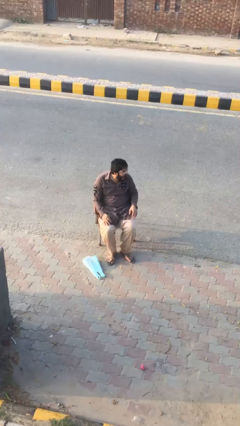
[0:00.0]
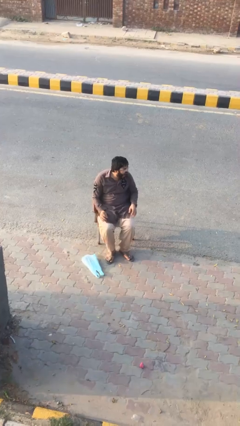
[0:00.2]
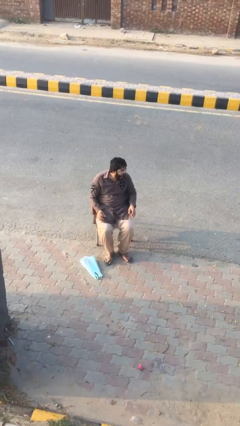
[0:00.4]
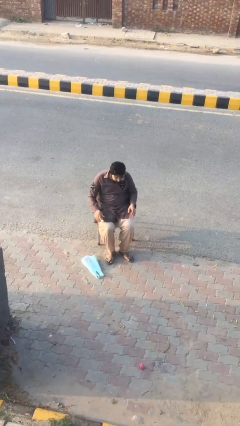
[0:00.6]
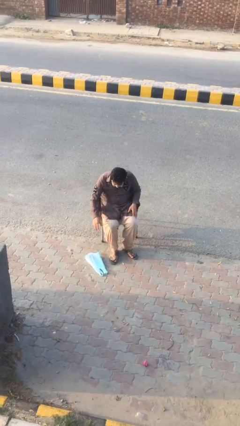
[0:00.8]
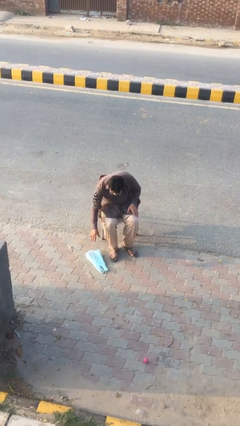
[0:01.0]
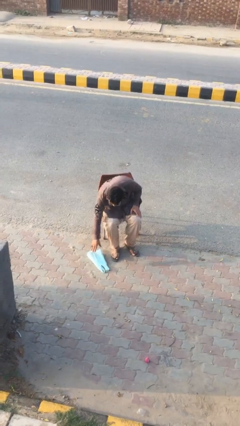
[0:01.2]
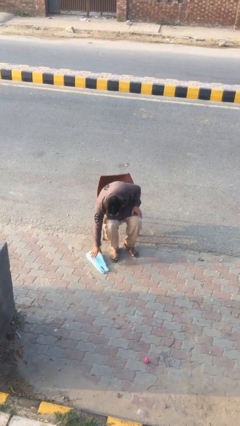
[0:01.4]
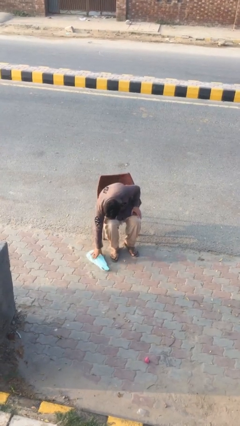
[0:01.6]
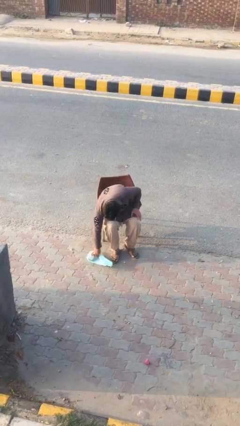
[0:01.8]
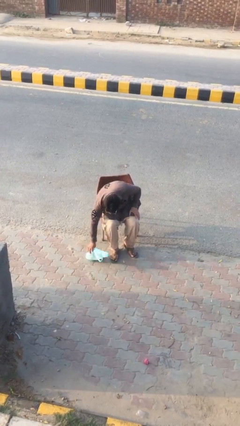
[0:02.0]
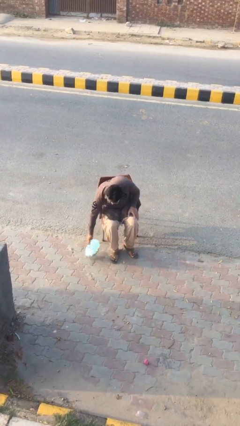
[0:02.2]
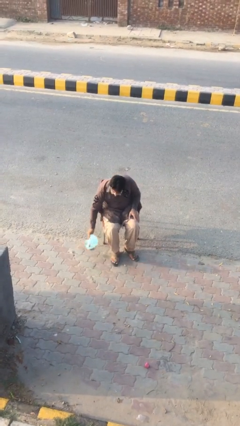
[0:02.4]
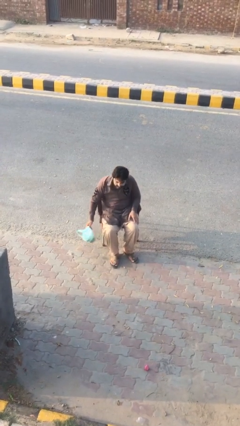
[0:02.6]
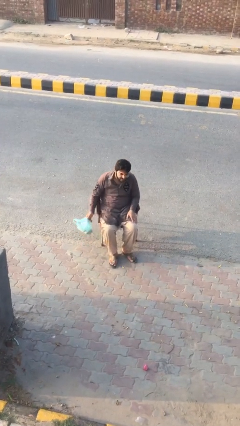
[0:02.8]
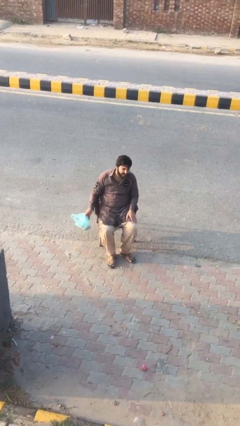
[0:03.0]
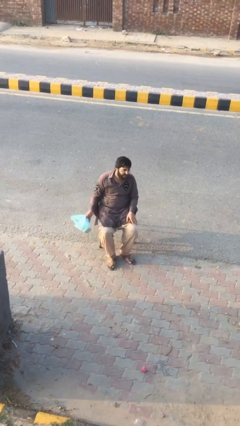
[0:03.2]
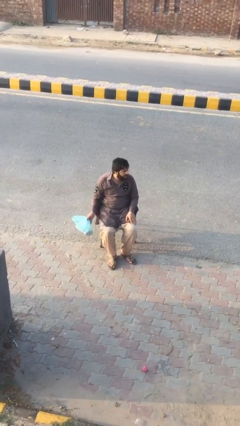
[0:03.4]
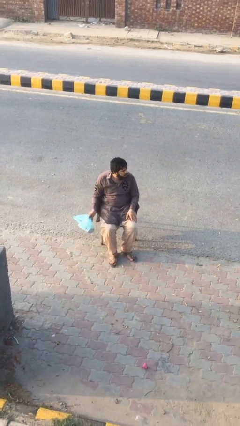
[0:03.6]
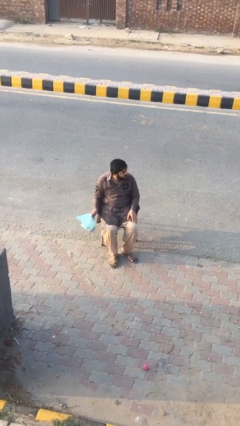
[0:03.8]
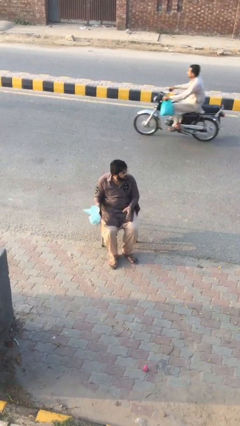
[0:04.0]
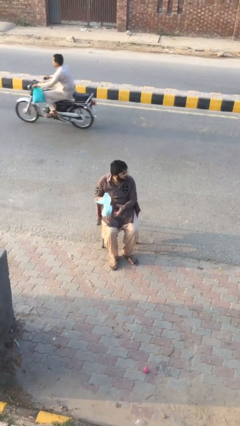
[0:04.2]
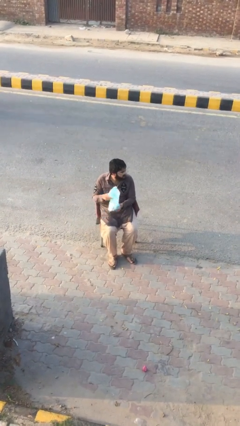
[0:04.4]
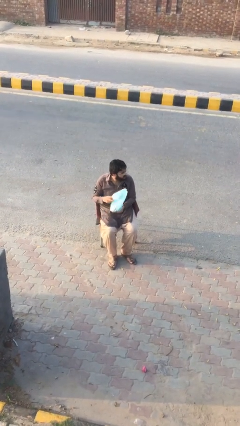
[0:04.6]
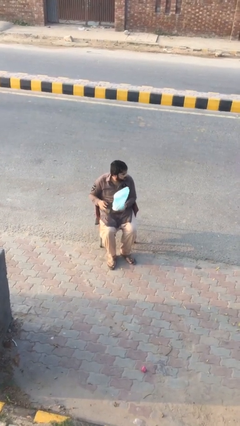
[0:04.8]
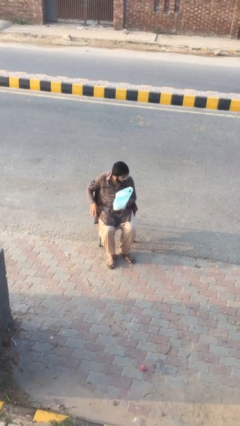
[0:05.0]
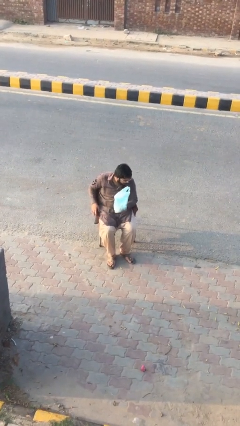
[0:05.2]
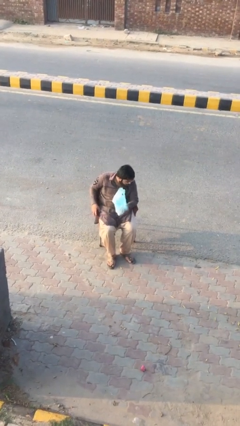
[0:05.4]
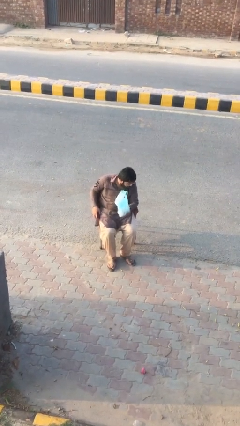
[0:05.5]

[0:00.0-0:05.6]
person picks up object from floor

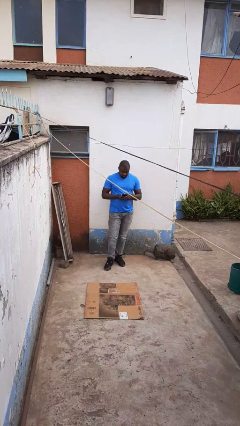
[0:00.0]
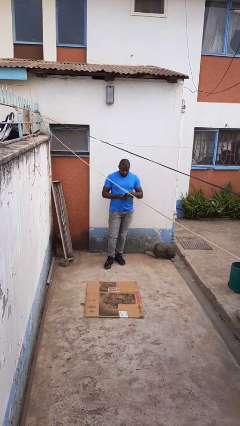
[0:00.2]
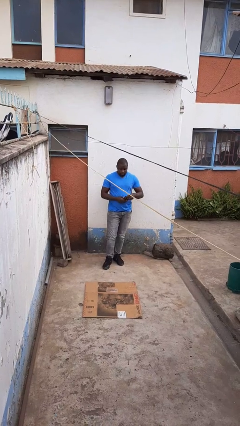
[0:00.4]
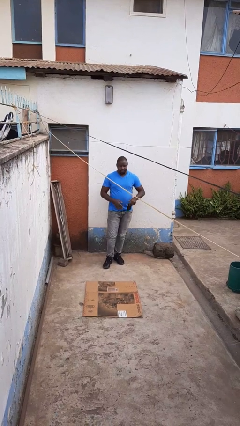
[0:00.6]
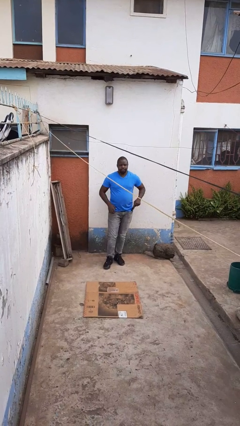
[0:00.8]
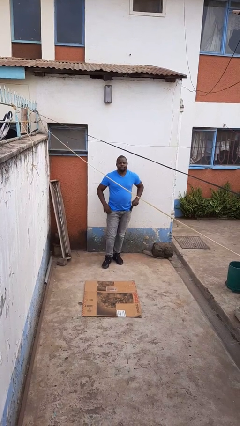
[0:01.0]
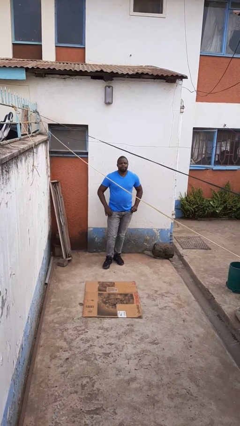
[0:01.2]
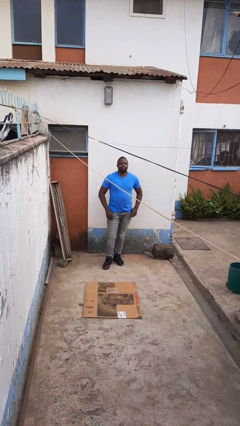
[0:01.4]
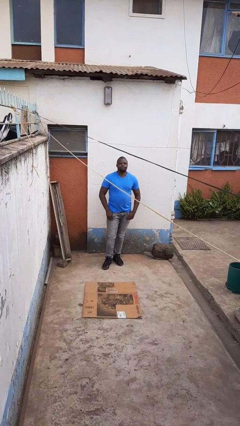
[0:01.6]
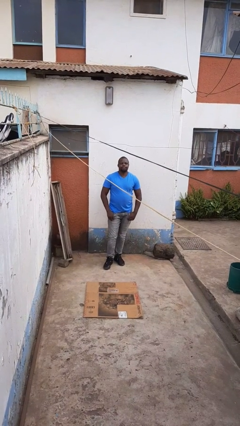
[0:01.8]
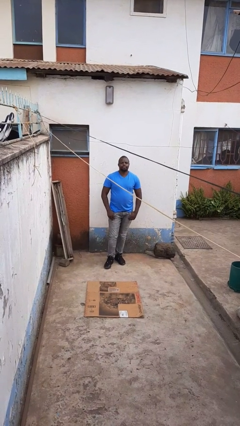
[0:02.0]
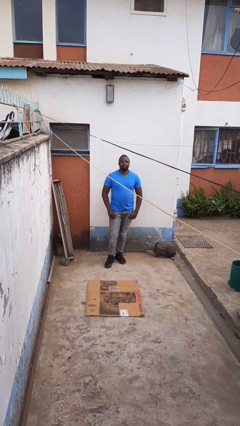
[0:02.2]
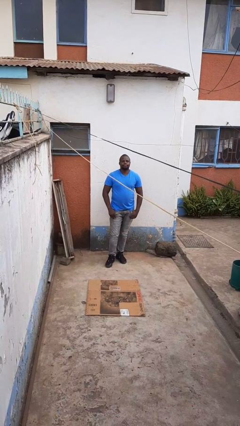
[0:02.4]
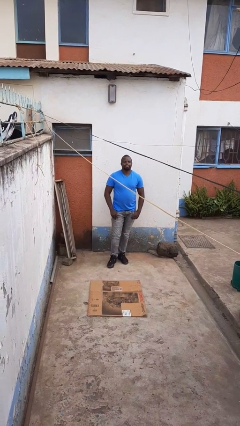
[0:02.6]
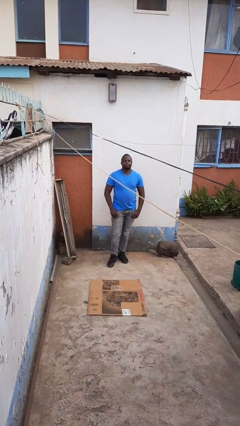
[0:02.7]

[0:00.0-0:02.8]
person puts phone into pocket

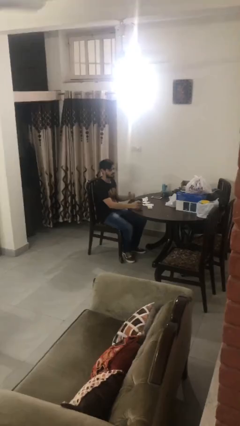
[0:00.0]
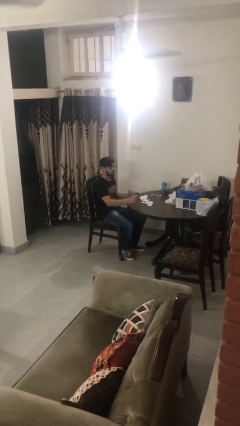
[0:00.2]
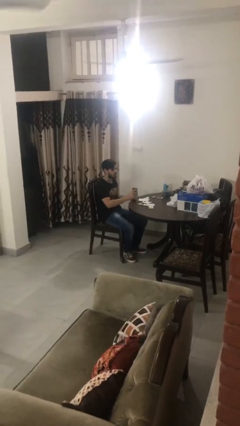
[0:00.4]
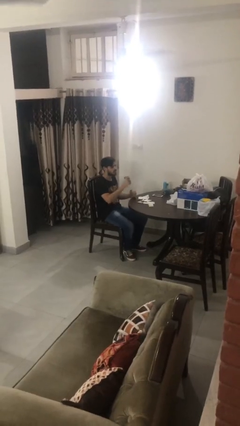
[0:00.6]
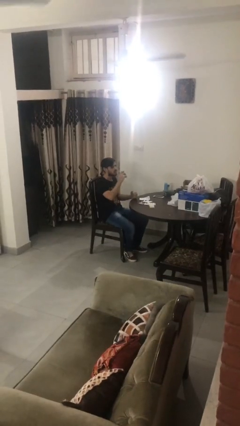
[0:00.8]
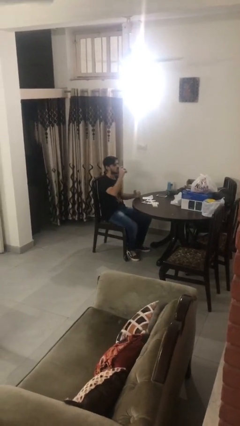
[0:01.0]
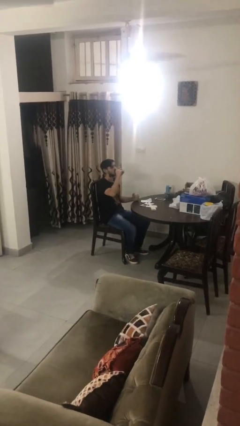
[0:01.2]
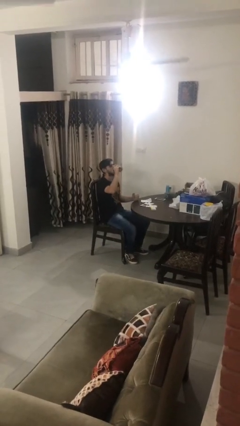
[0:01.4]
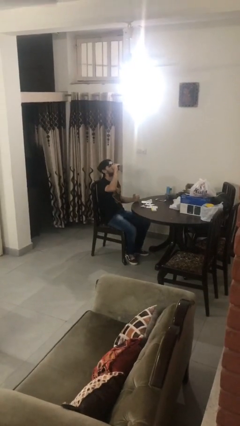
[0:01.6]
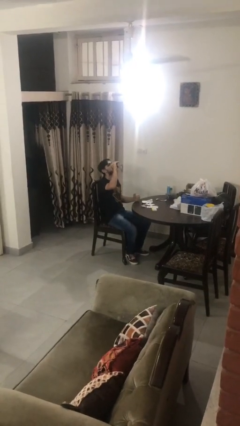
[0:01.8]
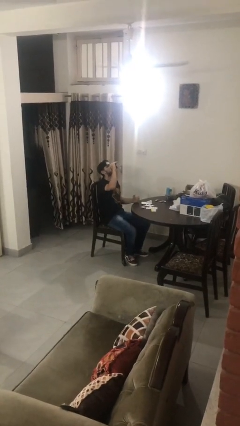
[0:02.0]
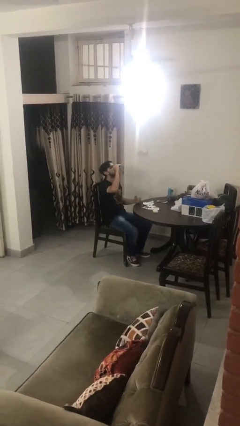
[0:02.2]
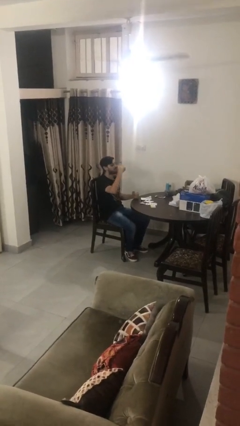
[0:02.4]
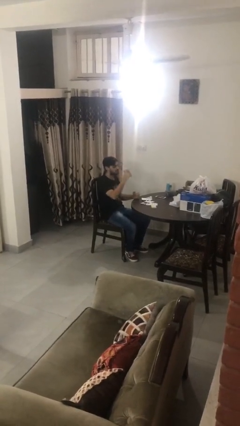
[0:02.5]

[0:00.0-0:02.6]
person drinks from cup

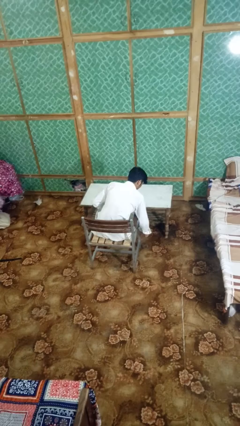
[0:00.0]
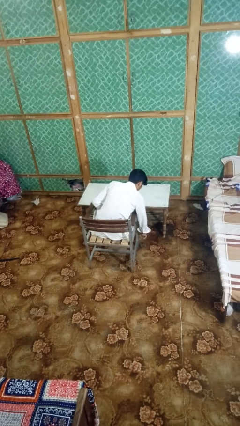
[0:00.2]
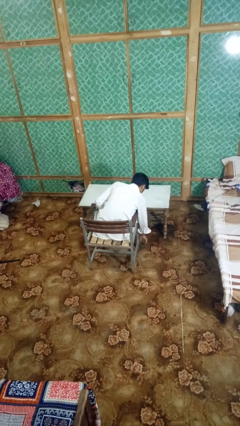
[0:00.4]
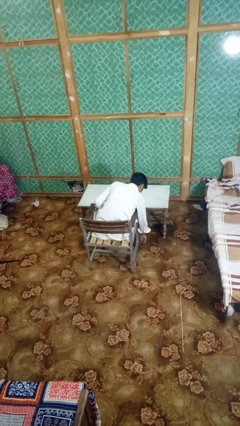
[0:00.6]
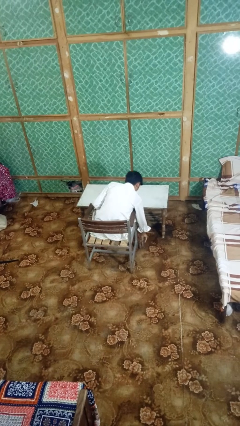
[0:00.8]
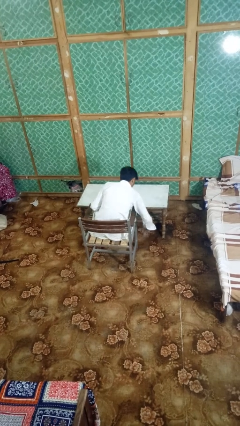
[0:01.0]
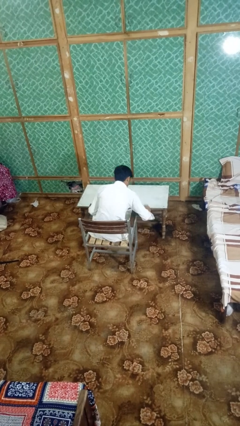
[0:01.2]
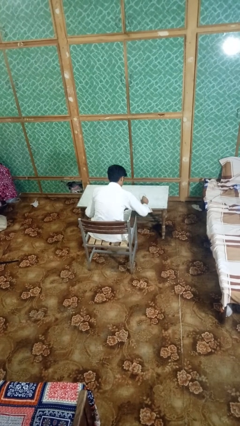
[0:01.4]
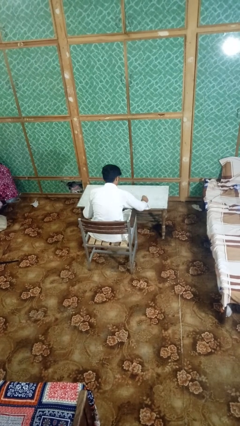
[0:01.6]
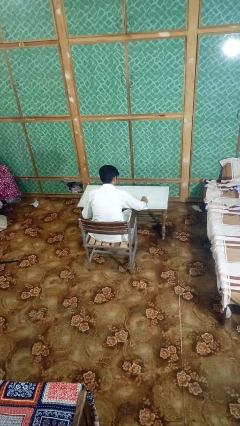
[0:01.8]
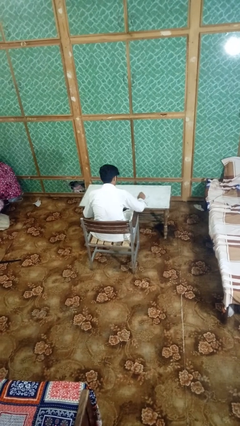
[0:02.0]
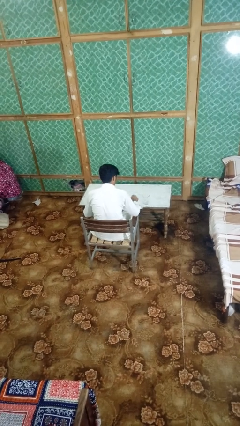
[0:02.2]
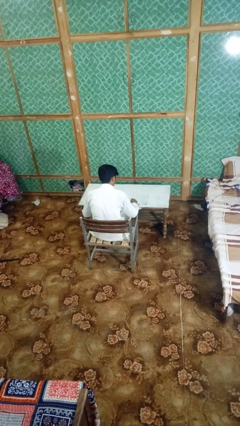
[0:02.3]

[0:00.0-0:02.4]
person sets upright glass

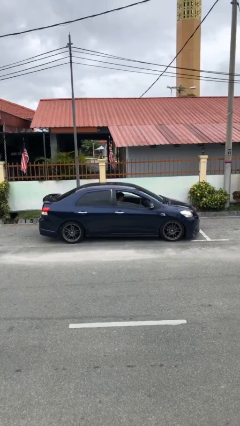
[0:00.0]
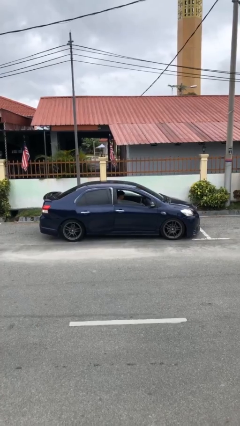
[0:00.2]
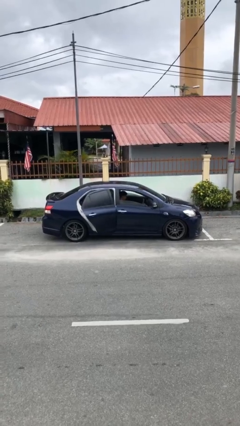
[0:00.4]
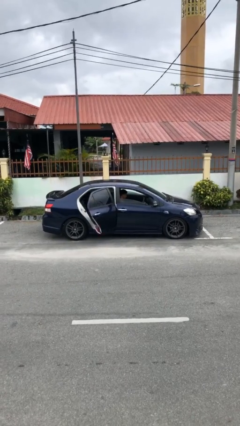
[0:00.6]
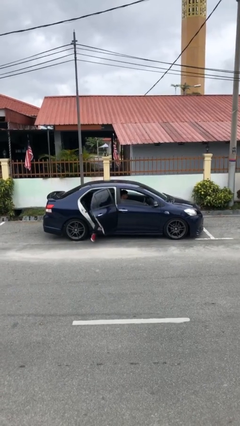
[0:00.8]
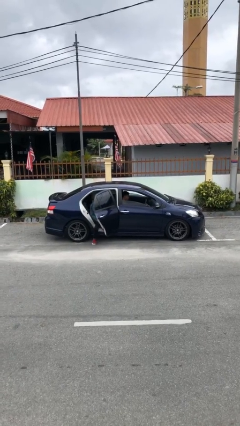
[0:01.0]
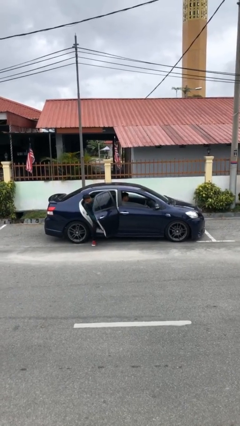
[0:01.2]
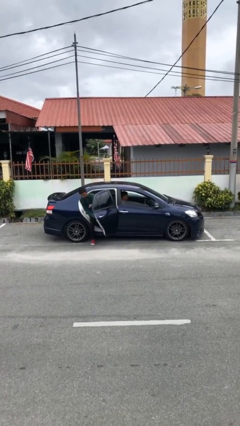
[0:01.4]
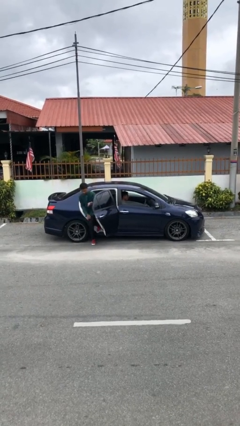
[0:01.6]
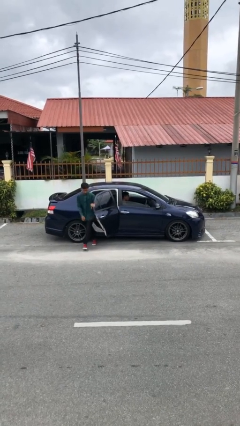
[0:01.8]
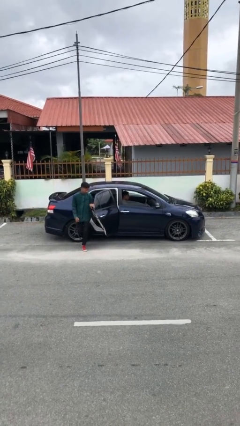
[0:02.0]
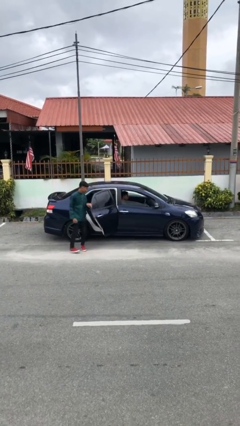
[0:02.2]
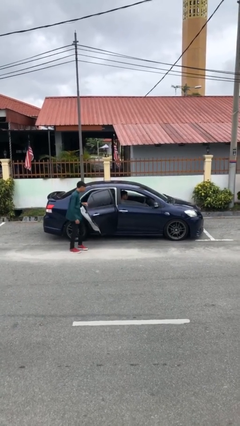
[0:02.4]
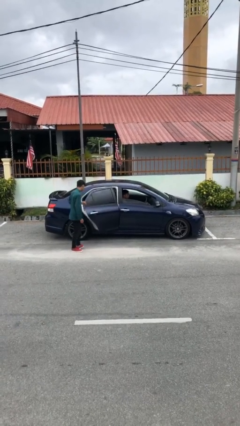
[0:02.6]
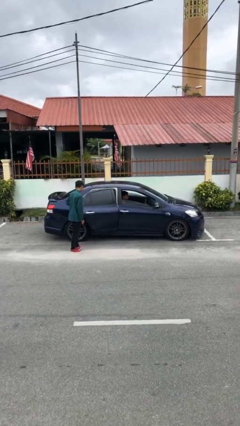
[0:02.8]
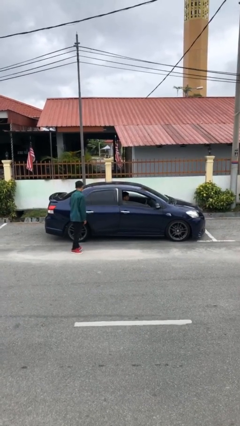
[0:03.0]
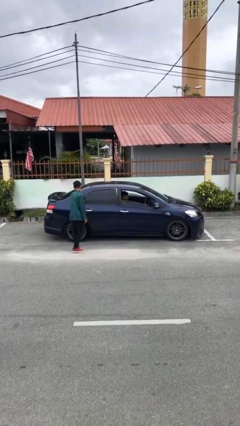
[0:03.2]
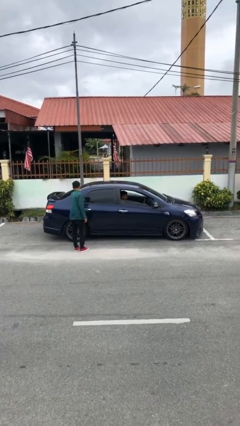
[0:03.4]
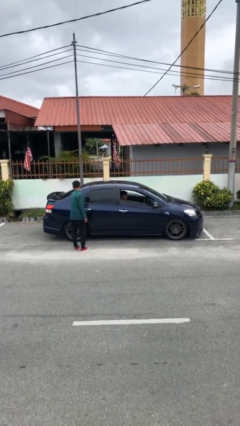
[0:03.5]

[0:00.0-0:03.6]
car drops off person

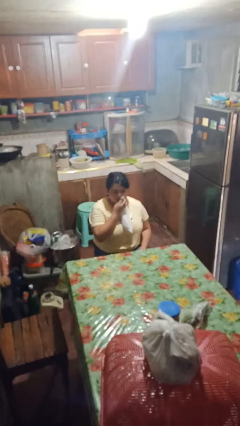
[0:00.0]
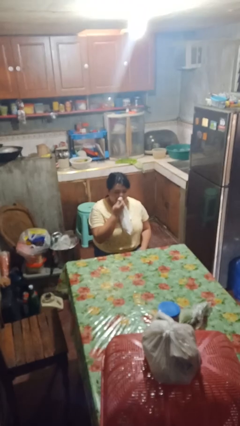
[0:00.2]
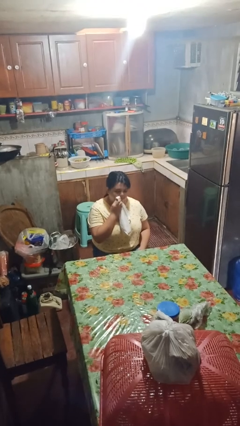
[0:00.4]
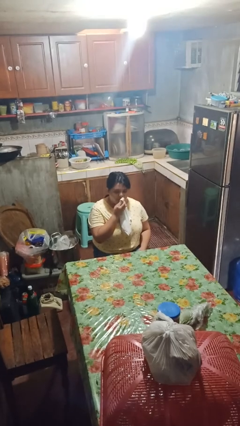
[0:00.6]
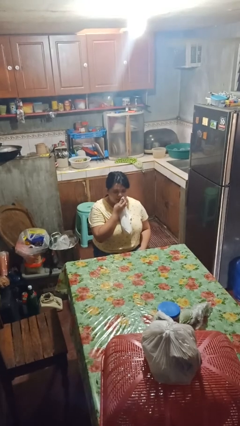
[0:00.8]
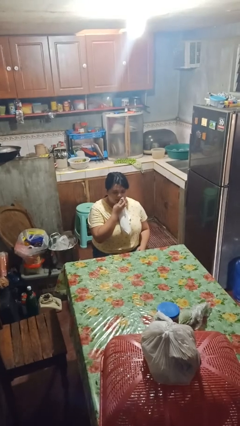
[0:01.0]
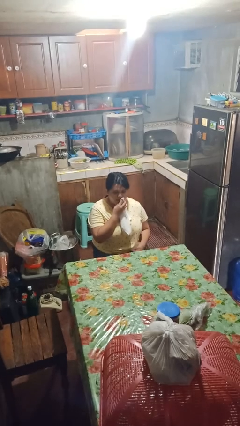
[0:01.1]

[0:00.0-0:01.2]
person wipes mouth with napkin
